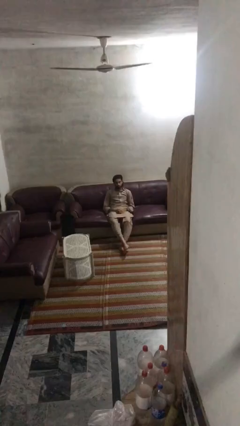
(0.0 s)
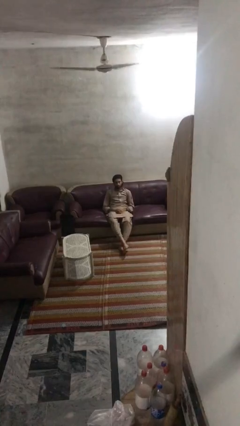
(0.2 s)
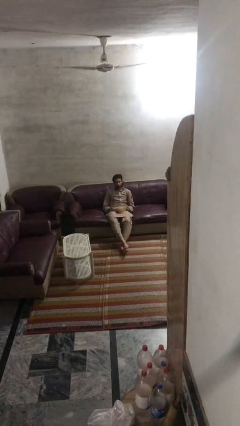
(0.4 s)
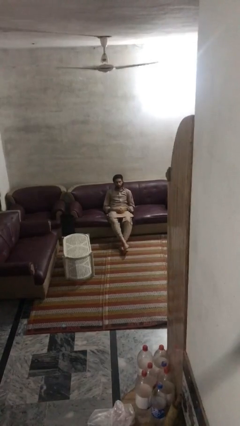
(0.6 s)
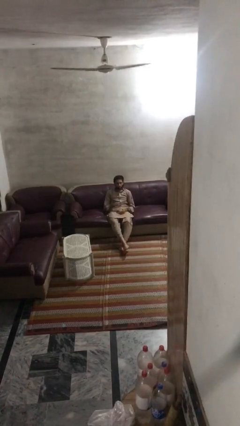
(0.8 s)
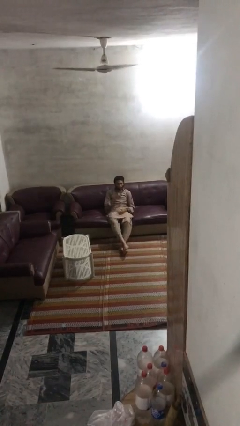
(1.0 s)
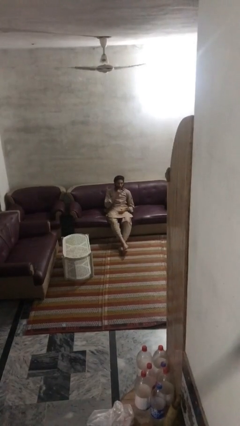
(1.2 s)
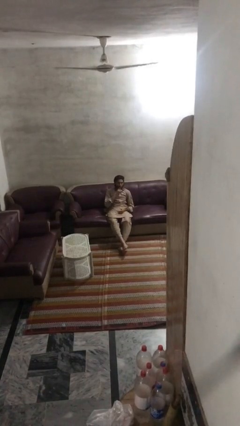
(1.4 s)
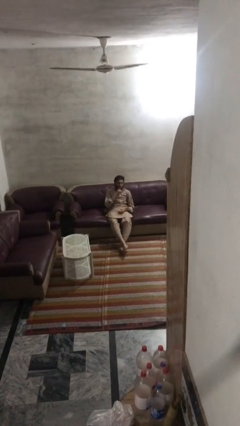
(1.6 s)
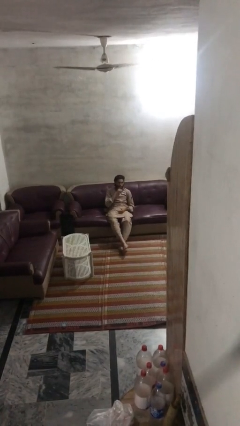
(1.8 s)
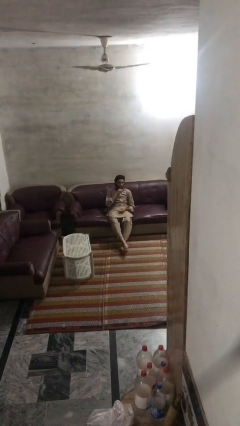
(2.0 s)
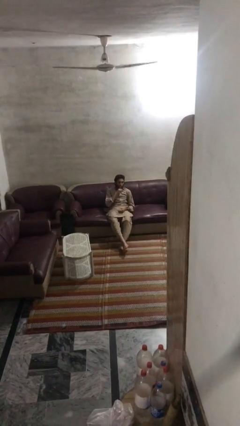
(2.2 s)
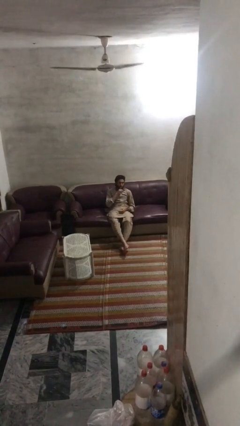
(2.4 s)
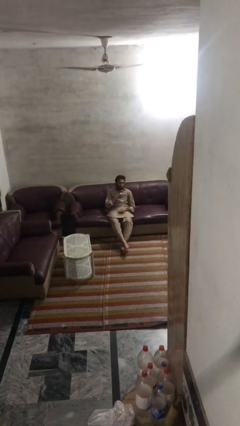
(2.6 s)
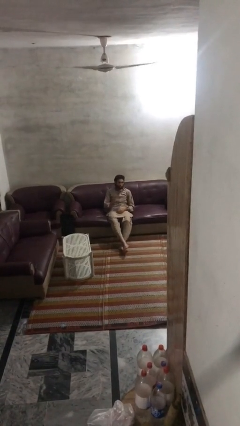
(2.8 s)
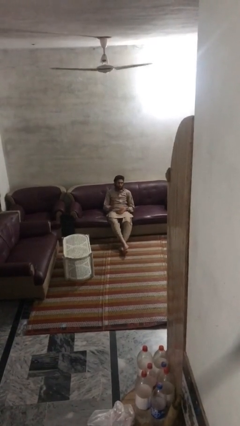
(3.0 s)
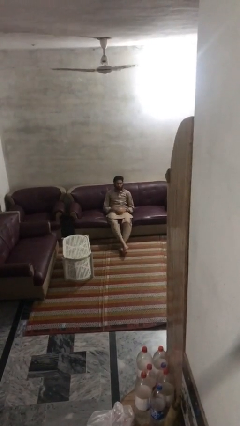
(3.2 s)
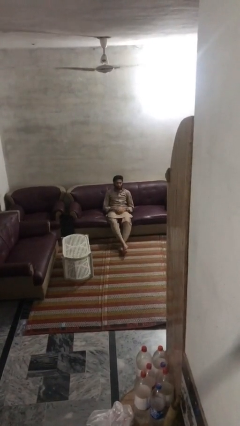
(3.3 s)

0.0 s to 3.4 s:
person gestures be quiet

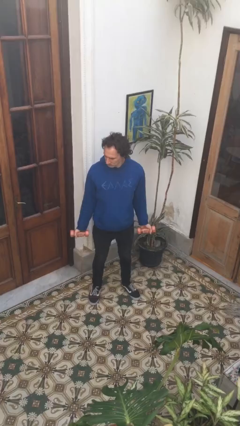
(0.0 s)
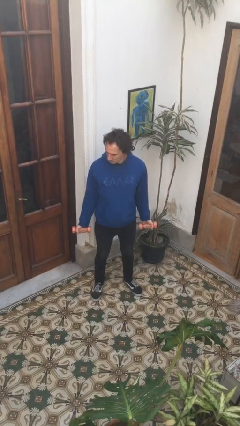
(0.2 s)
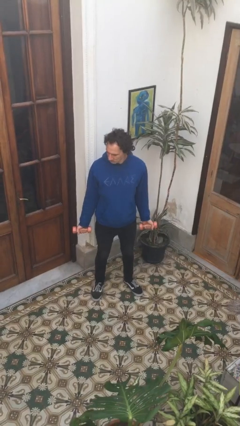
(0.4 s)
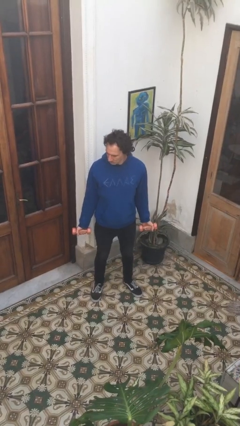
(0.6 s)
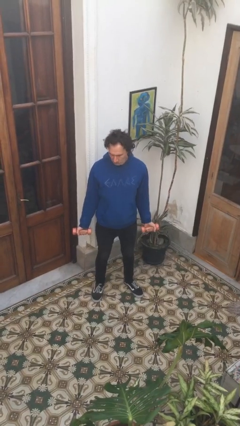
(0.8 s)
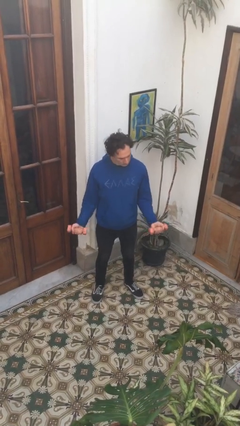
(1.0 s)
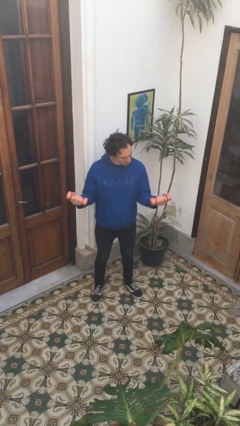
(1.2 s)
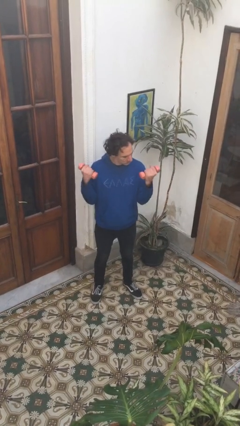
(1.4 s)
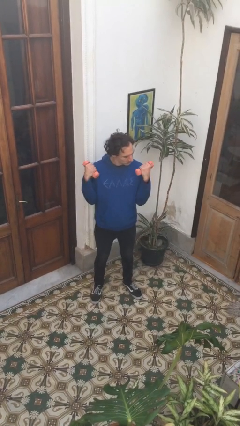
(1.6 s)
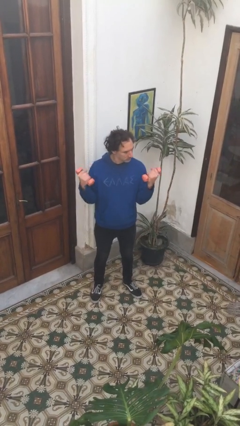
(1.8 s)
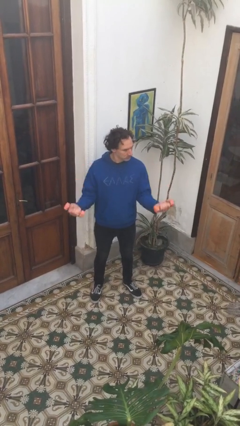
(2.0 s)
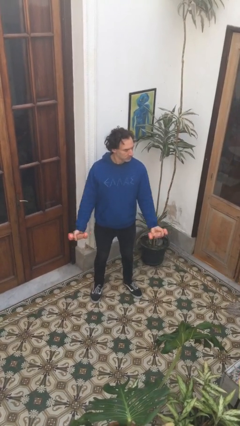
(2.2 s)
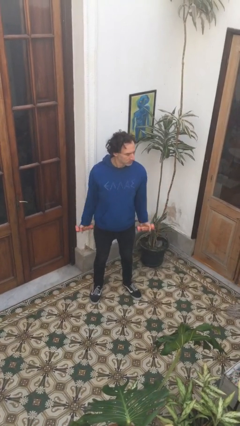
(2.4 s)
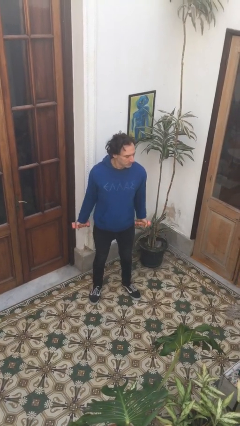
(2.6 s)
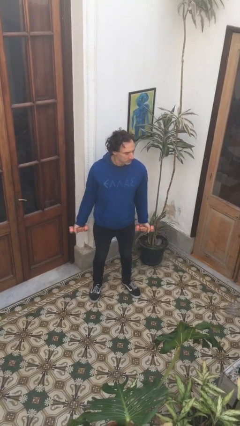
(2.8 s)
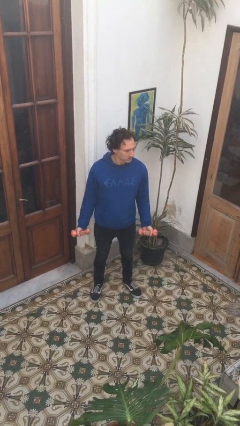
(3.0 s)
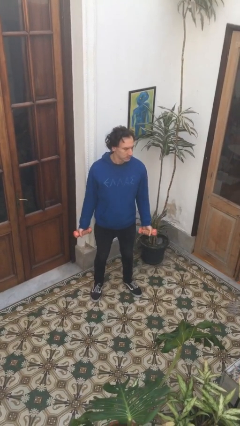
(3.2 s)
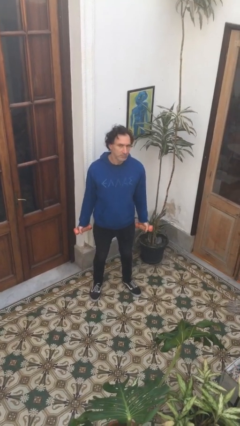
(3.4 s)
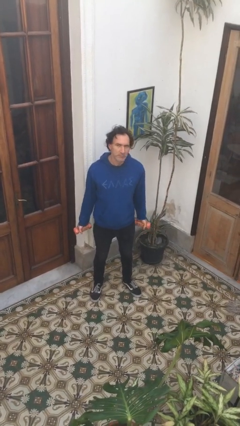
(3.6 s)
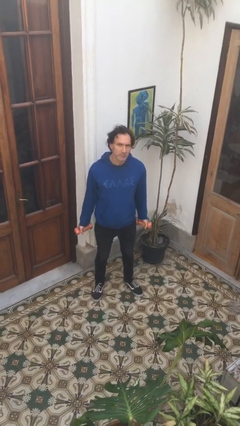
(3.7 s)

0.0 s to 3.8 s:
person lifts dumbbells

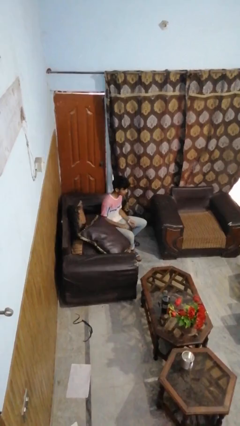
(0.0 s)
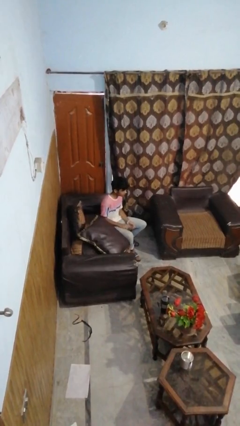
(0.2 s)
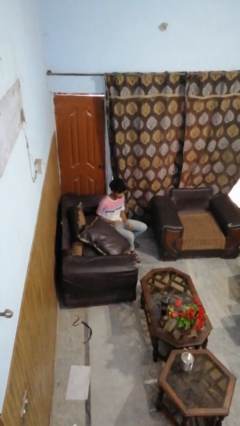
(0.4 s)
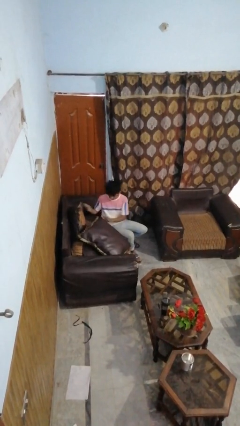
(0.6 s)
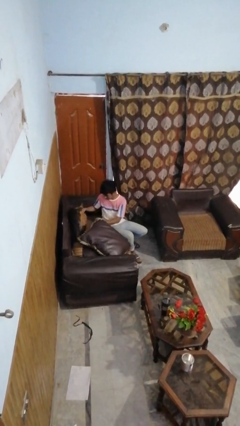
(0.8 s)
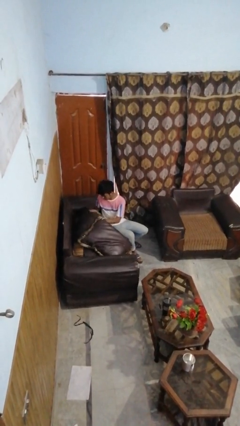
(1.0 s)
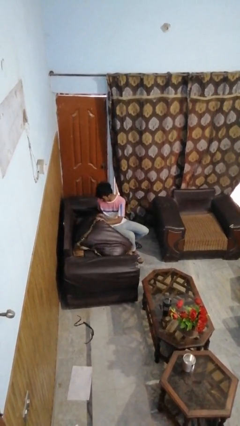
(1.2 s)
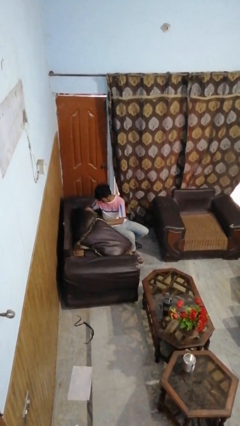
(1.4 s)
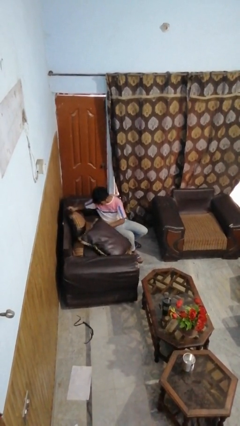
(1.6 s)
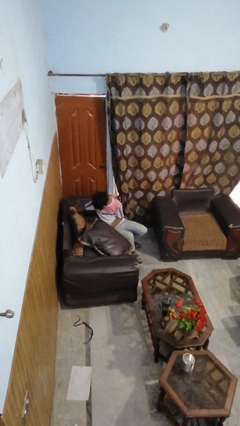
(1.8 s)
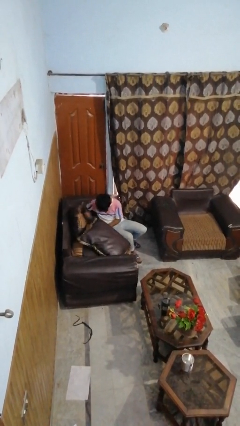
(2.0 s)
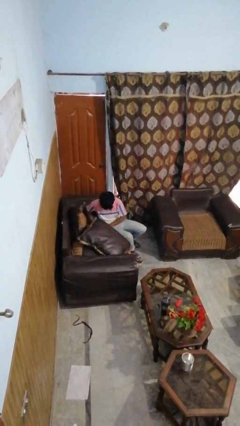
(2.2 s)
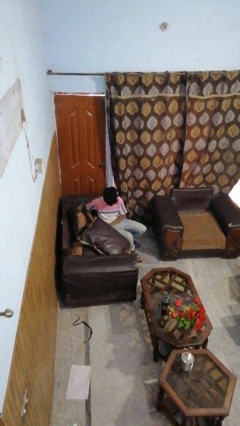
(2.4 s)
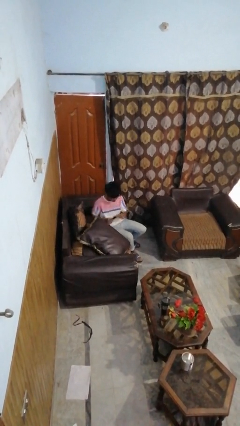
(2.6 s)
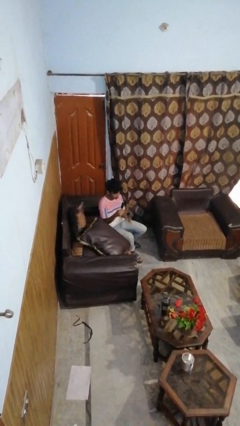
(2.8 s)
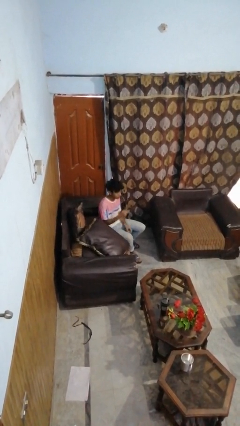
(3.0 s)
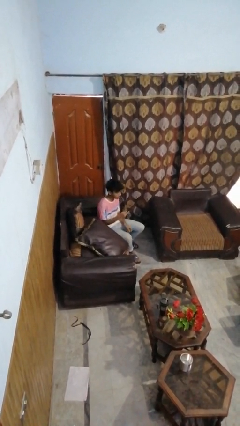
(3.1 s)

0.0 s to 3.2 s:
person searches in couch

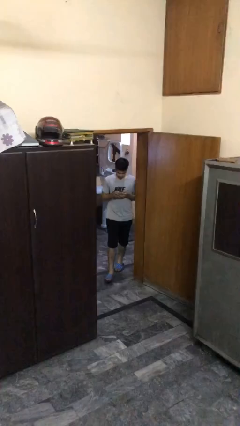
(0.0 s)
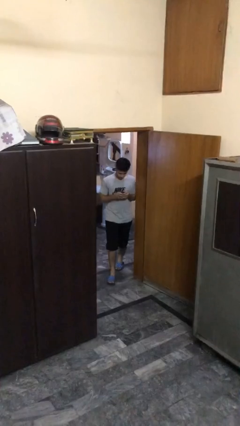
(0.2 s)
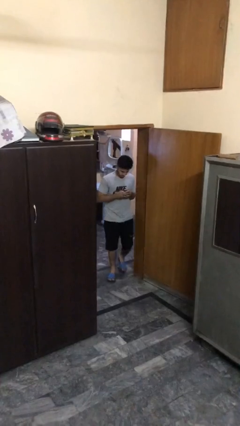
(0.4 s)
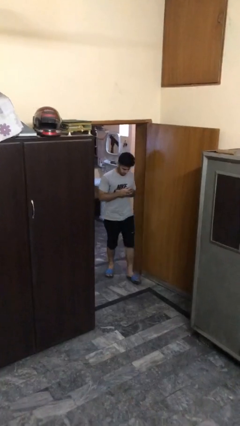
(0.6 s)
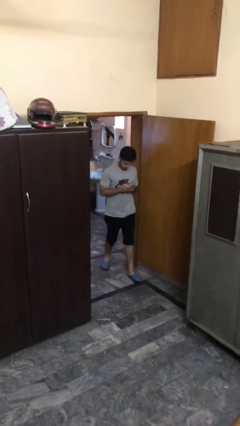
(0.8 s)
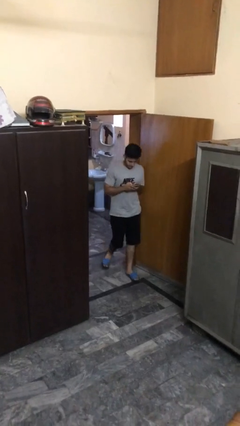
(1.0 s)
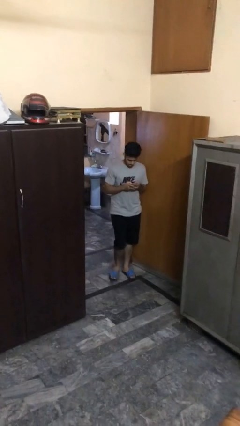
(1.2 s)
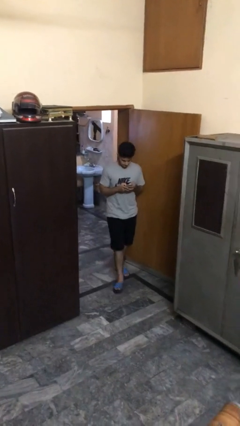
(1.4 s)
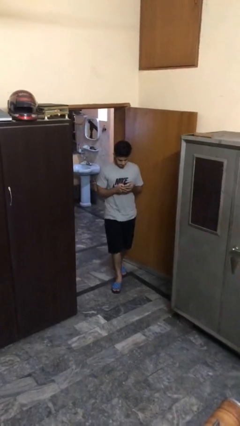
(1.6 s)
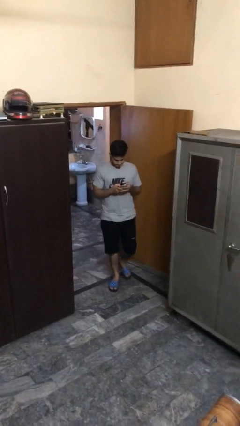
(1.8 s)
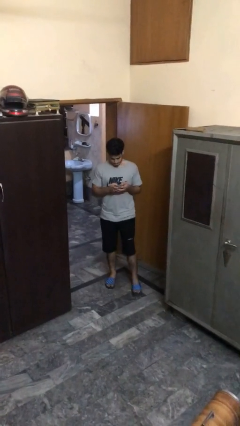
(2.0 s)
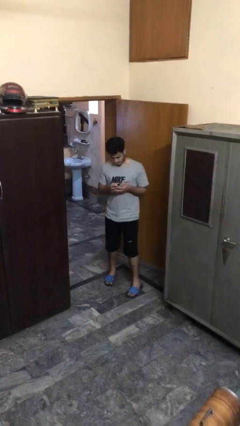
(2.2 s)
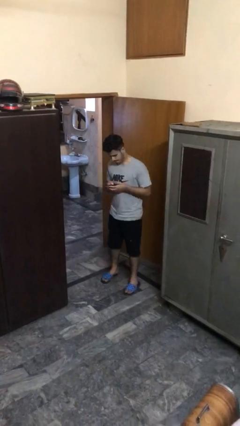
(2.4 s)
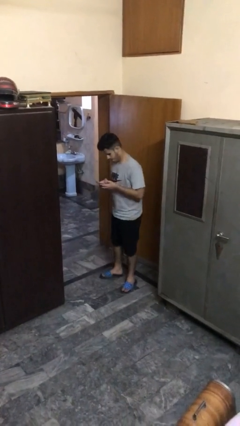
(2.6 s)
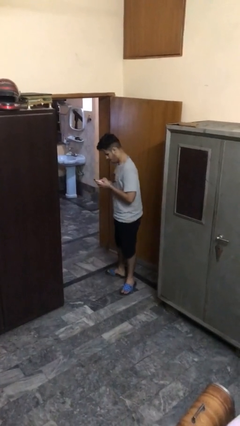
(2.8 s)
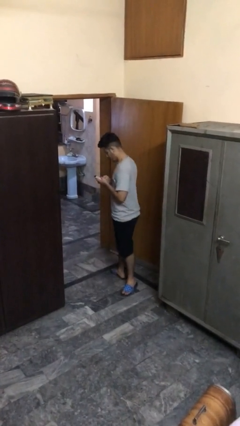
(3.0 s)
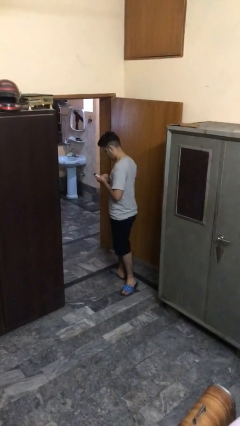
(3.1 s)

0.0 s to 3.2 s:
person enters scene through structure

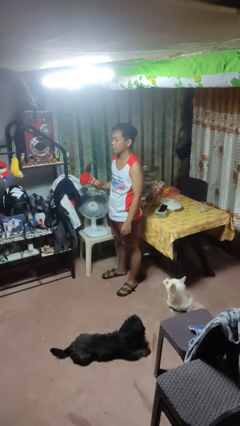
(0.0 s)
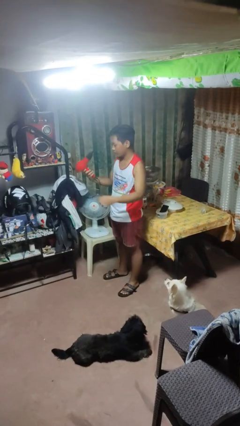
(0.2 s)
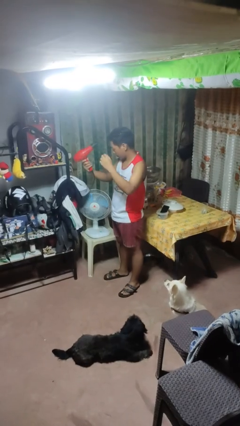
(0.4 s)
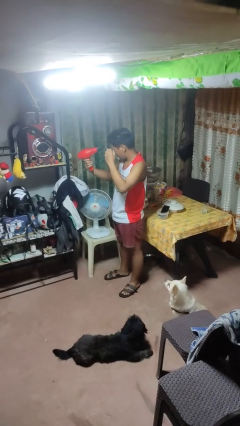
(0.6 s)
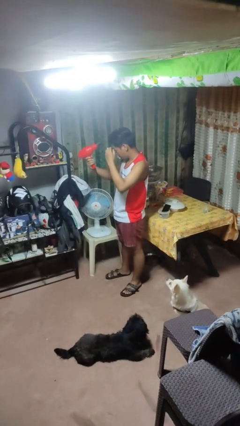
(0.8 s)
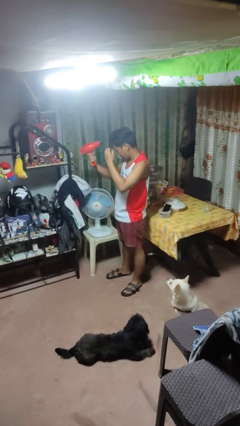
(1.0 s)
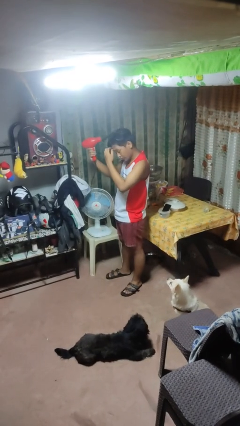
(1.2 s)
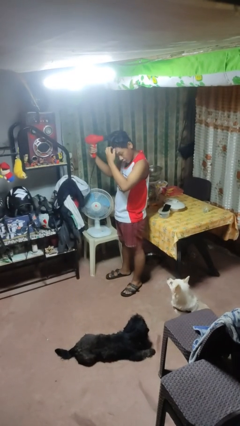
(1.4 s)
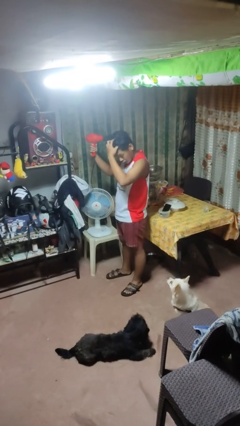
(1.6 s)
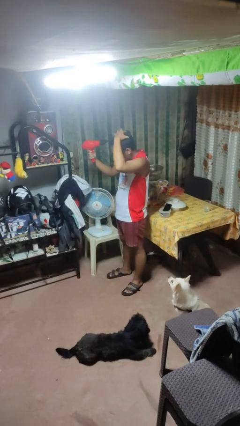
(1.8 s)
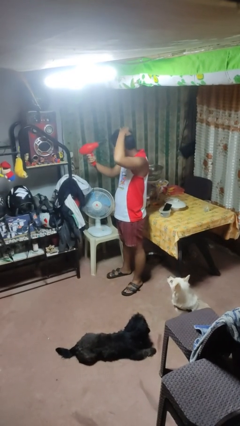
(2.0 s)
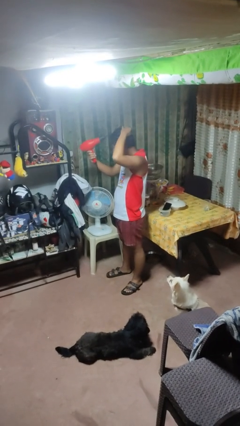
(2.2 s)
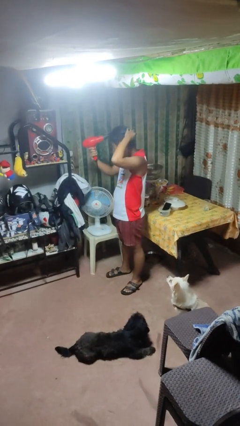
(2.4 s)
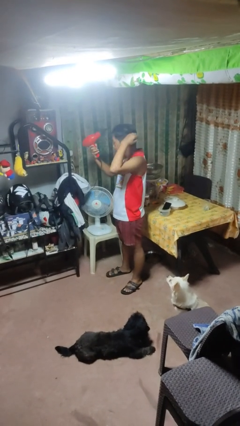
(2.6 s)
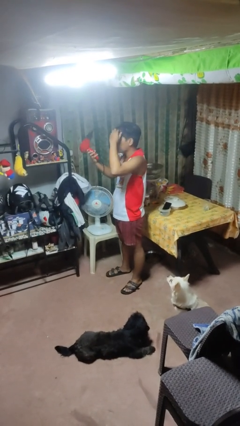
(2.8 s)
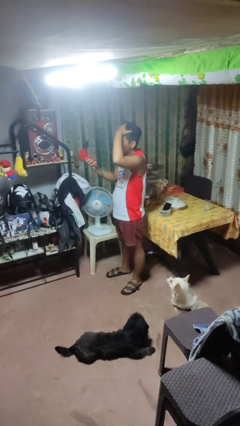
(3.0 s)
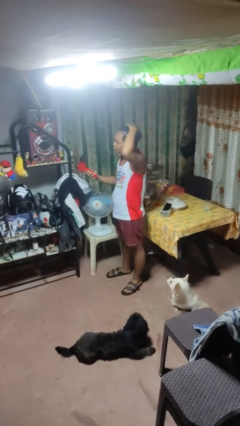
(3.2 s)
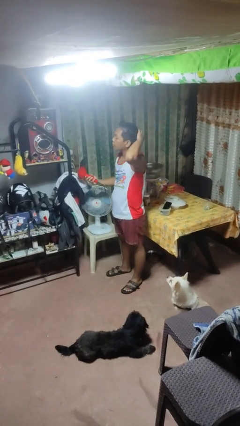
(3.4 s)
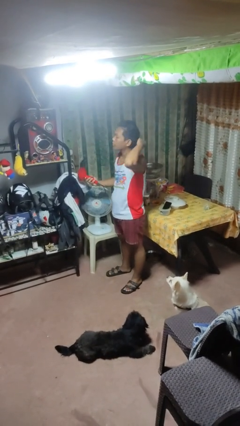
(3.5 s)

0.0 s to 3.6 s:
person dries hair with hairdryer
